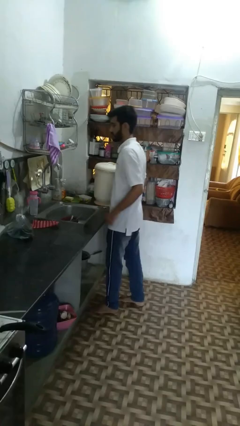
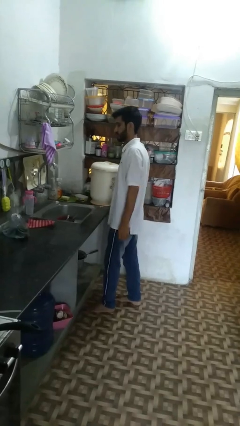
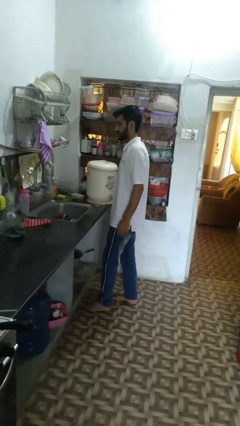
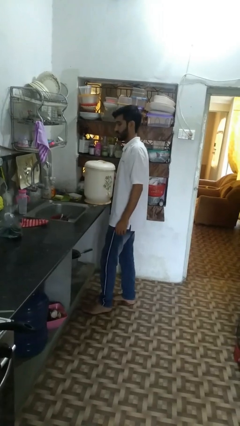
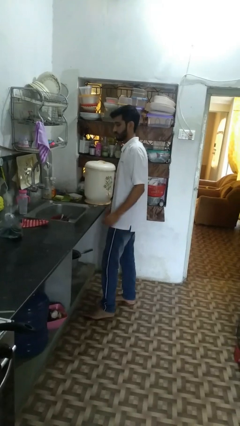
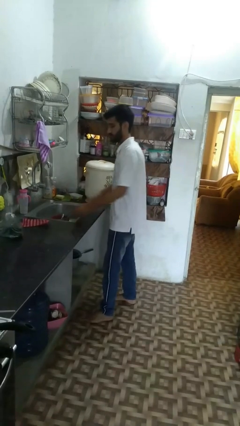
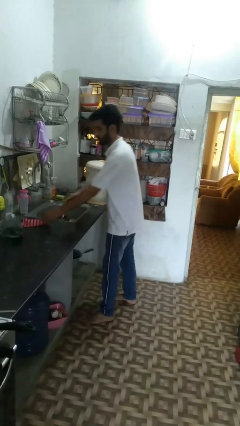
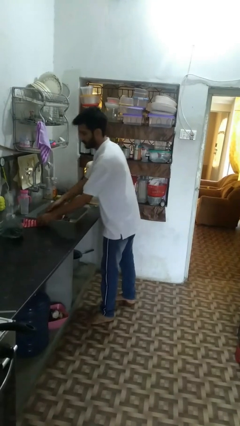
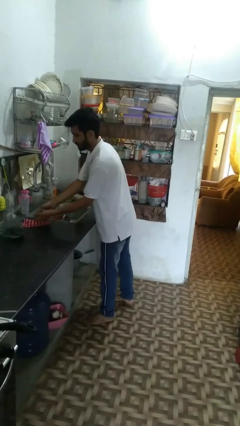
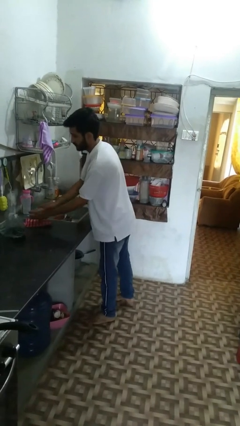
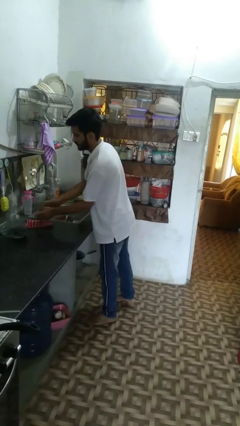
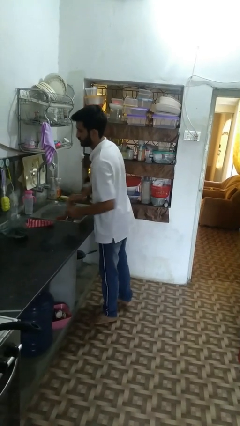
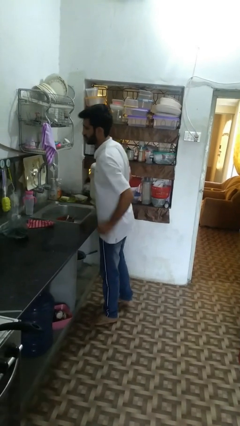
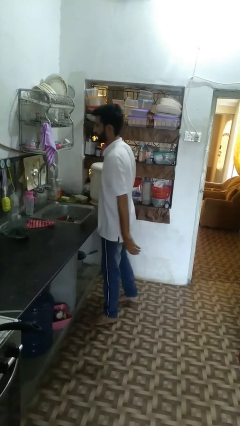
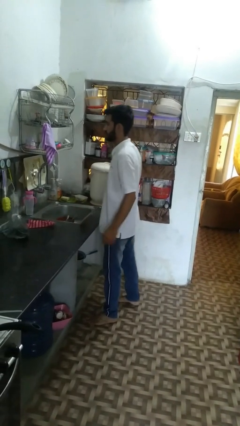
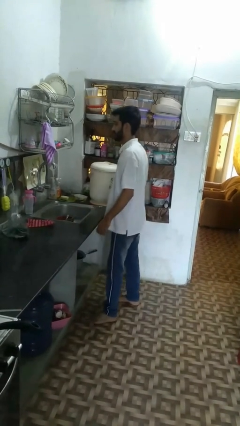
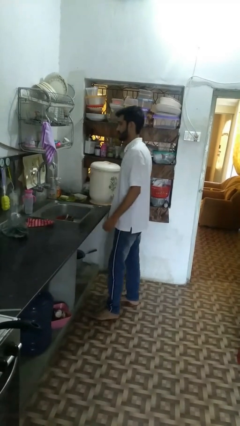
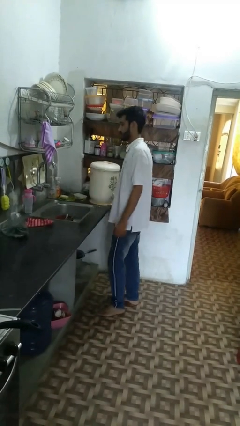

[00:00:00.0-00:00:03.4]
person dries hands with towel

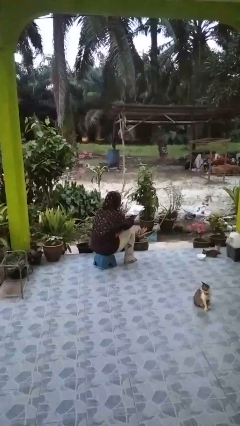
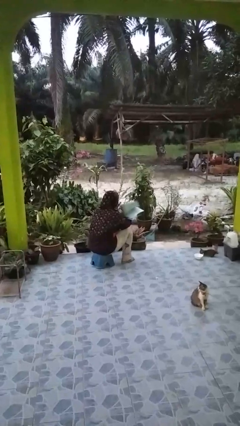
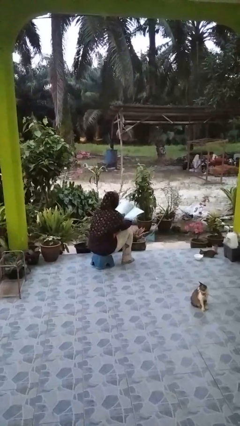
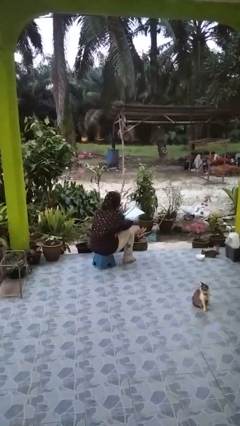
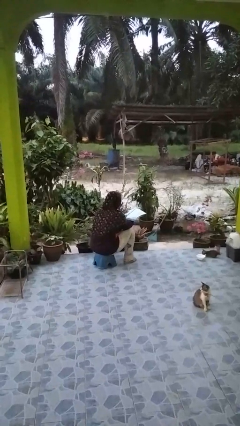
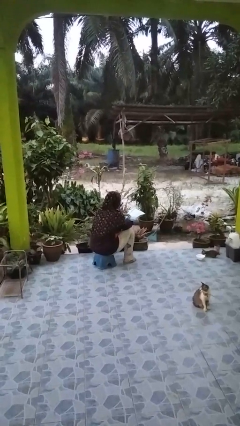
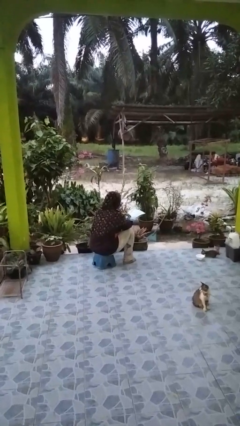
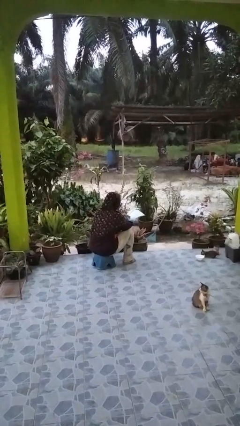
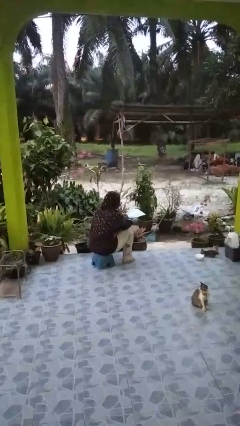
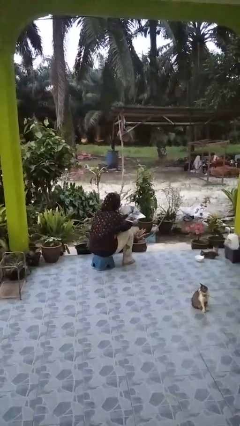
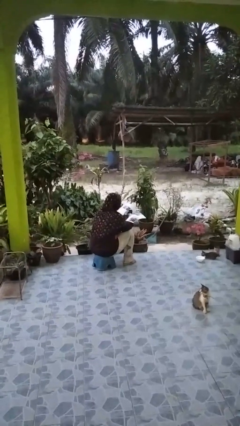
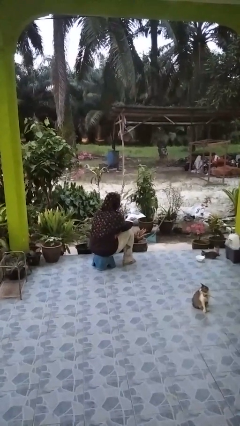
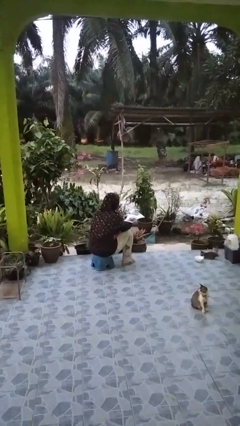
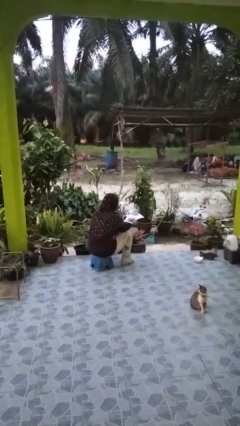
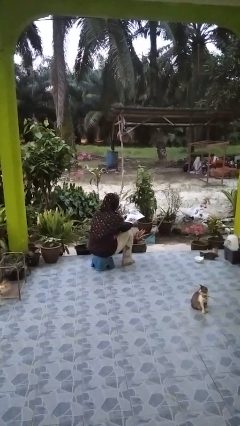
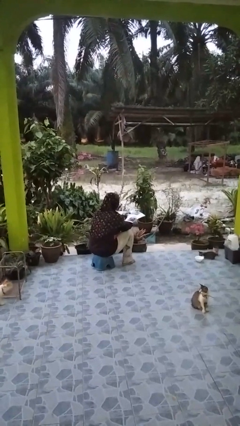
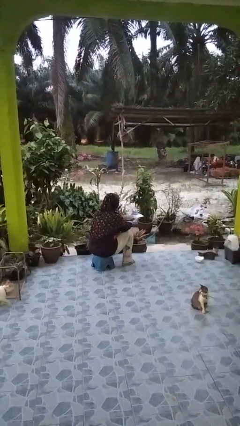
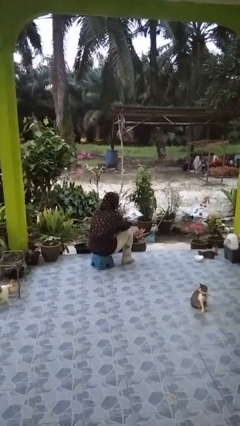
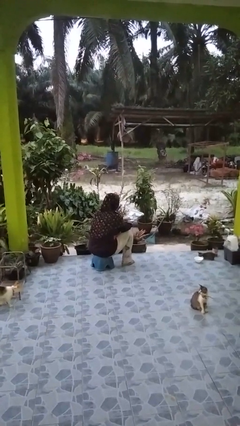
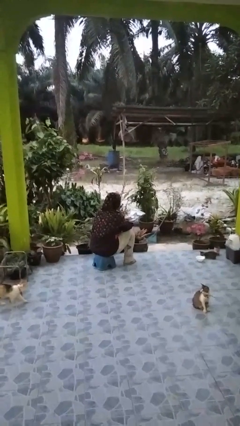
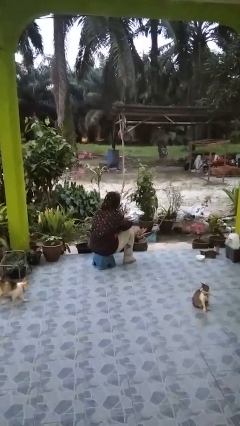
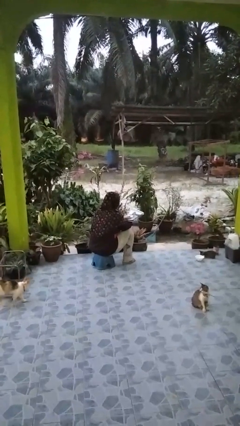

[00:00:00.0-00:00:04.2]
person reads magazine

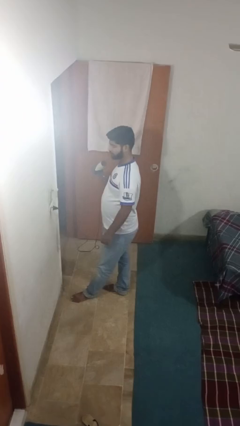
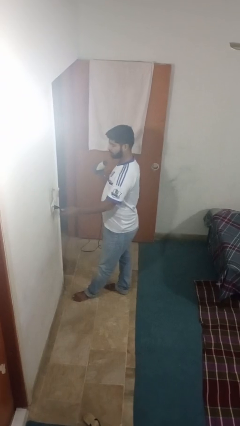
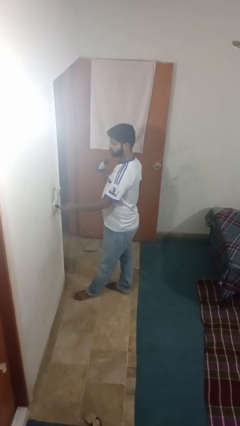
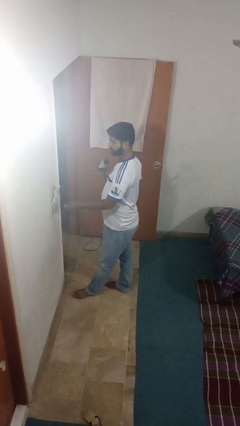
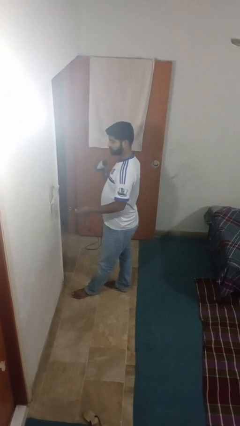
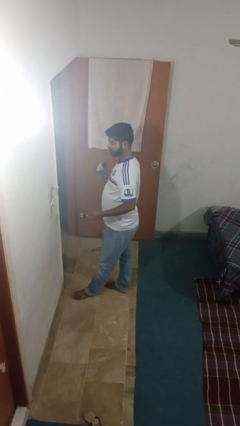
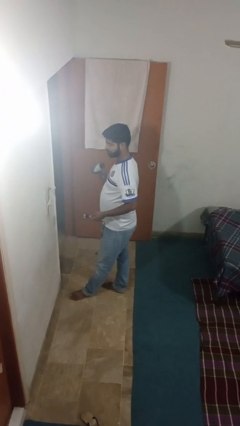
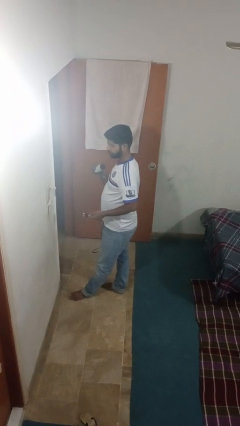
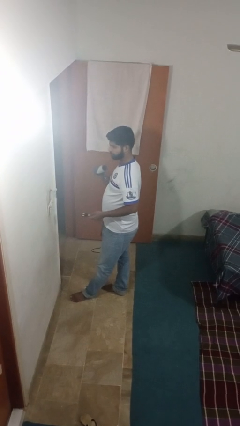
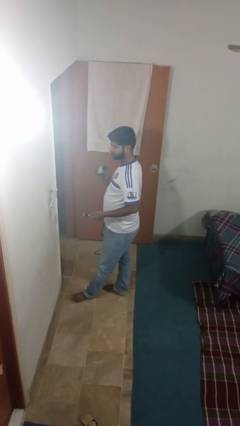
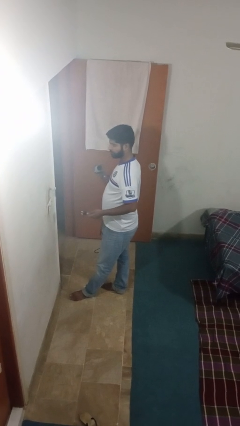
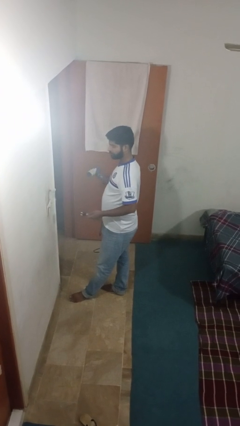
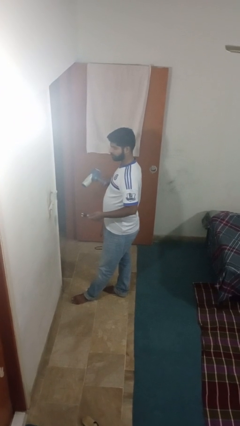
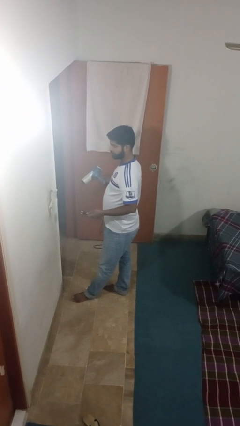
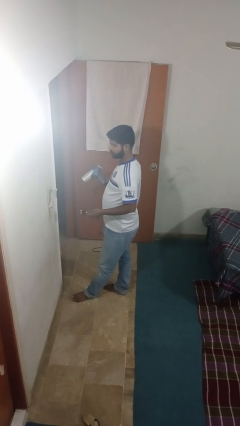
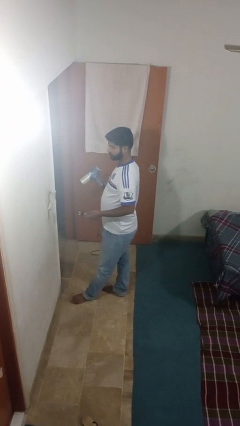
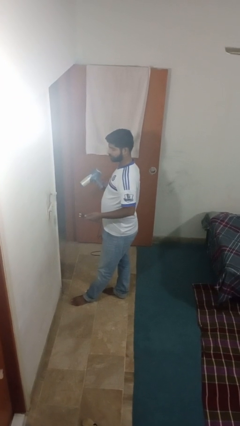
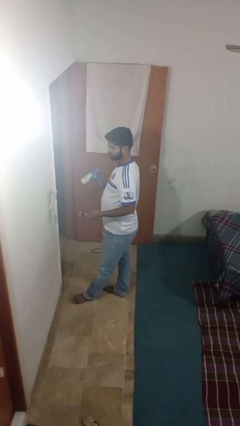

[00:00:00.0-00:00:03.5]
person unplugs from electrical socket

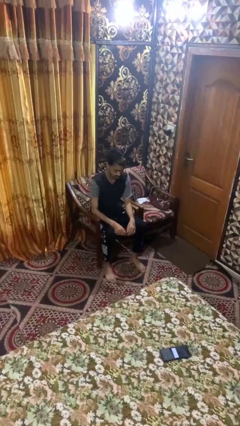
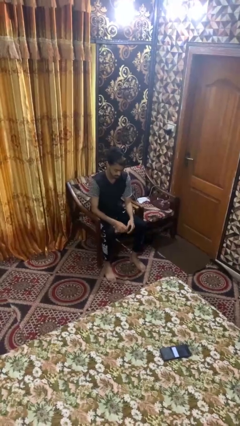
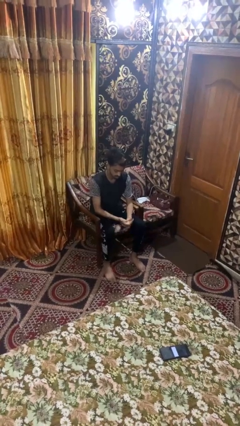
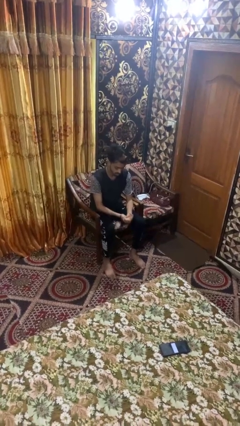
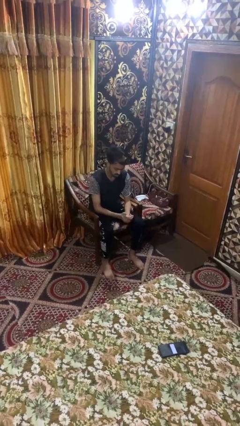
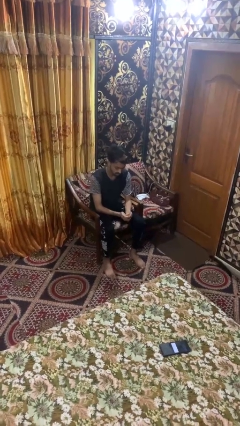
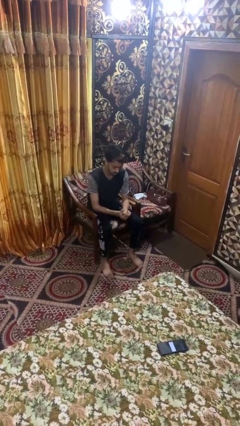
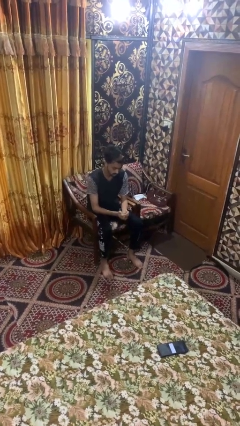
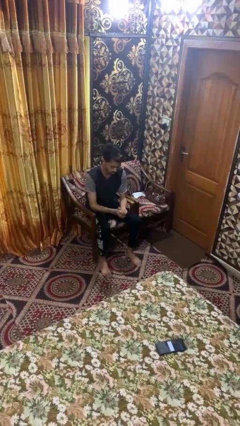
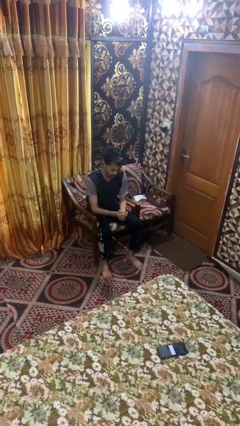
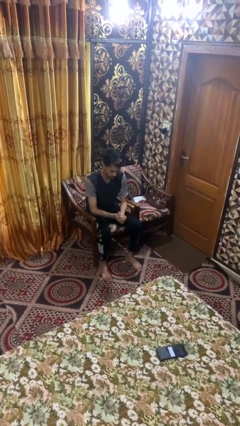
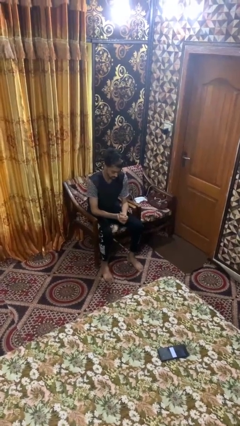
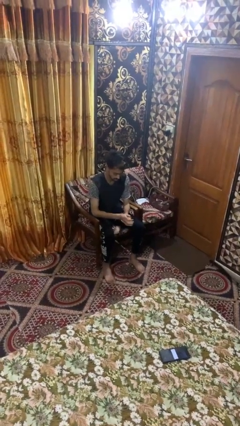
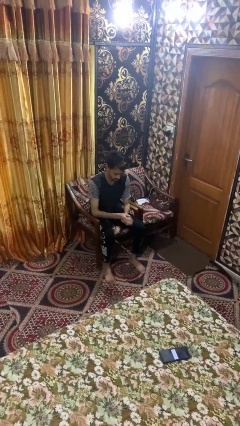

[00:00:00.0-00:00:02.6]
person looks at hands in lap

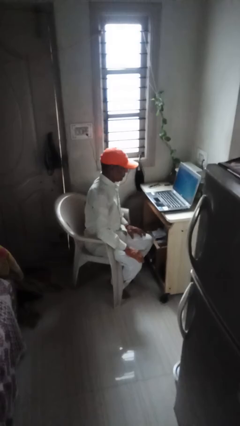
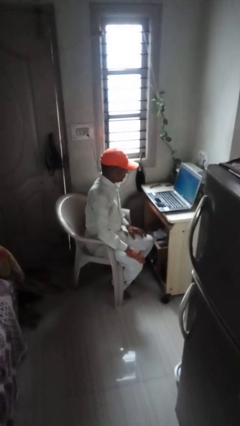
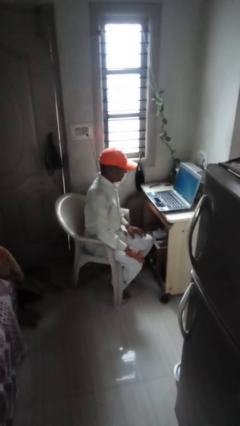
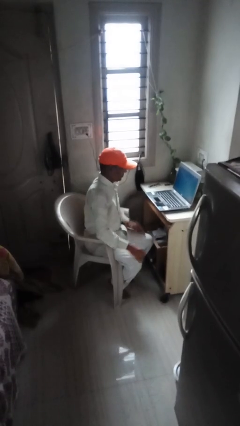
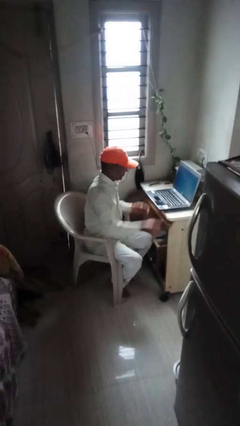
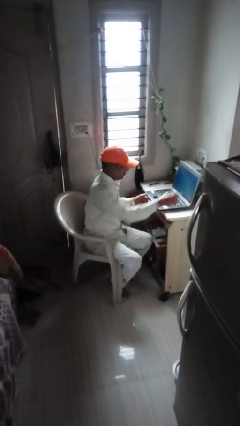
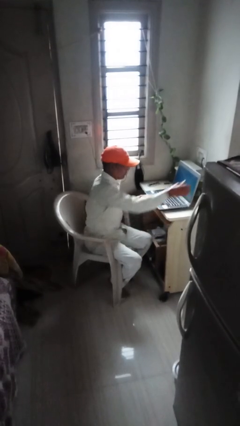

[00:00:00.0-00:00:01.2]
person closes laptop

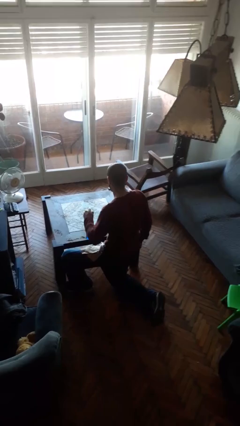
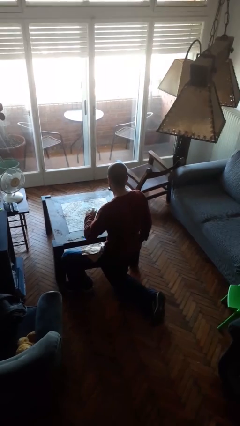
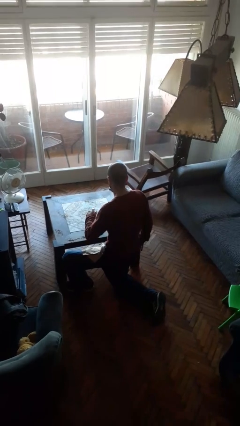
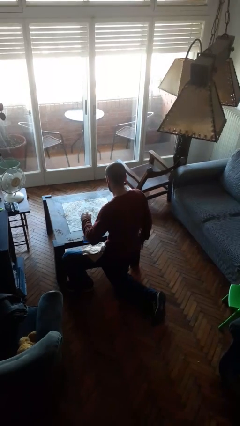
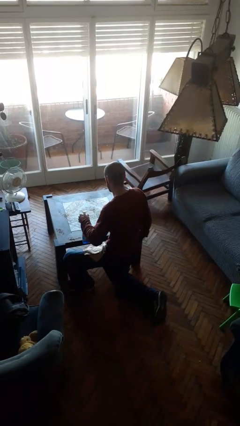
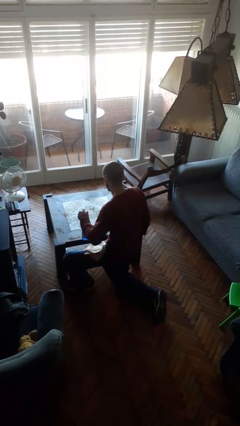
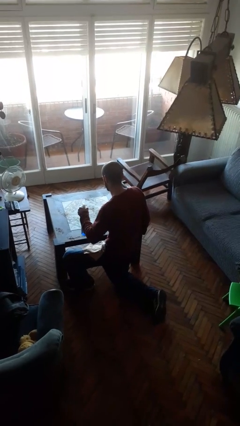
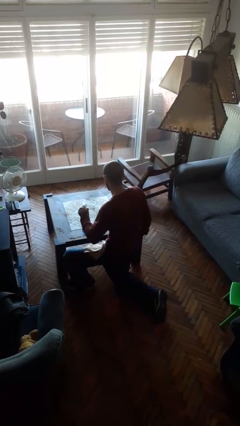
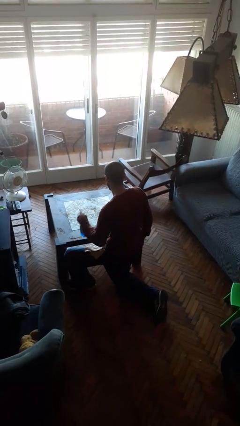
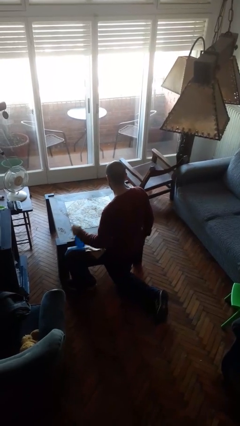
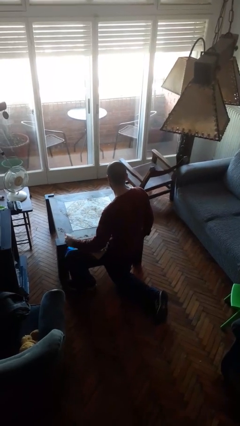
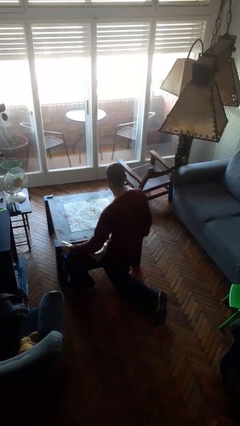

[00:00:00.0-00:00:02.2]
person sprays from bottle

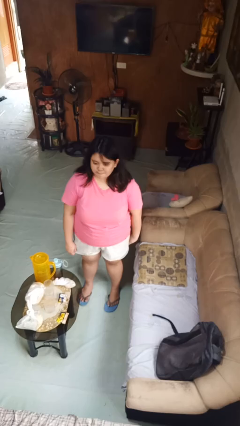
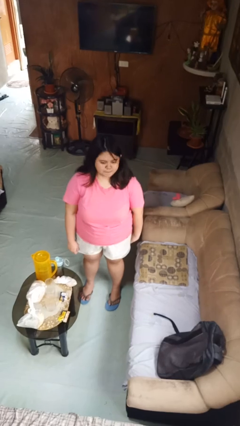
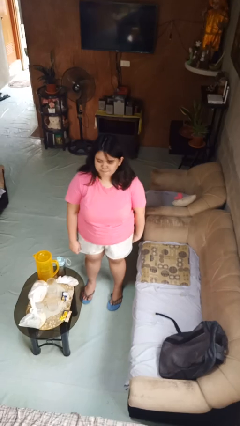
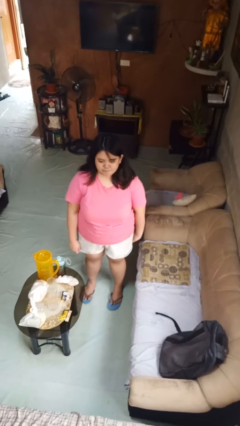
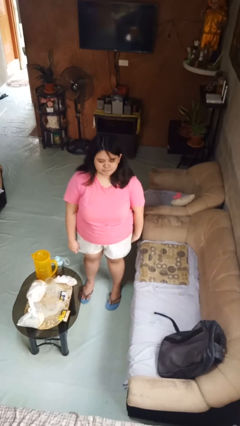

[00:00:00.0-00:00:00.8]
person shakes head
